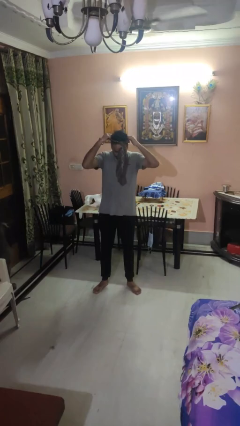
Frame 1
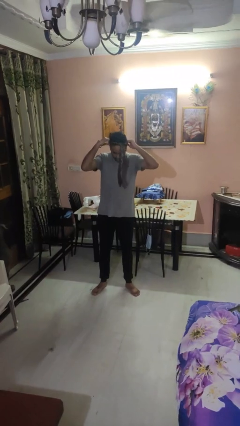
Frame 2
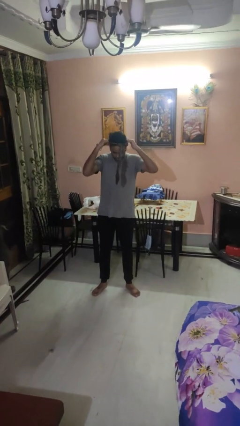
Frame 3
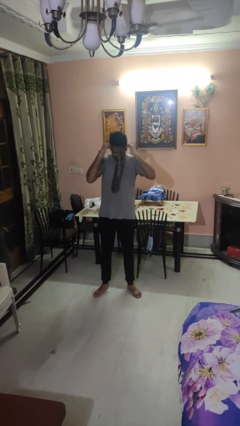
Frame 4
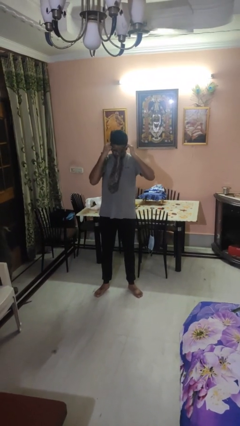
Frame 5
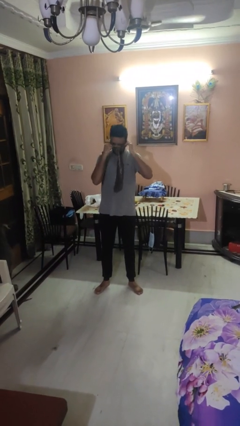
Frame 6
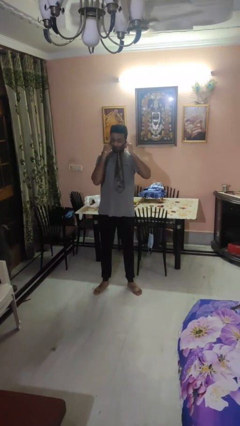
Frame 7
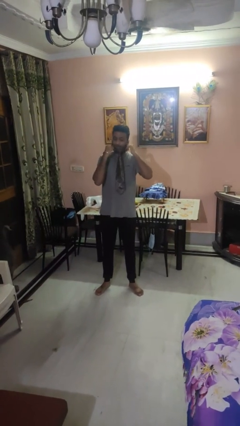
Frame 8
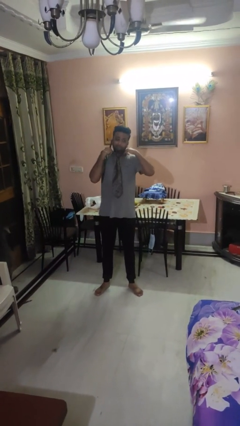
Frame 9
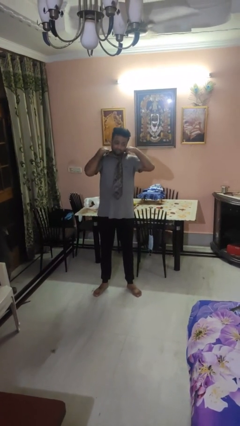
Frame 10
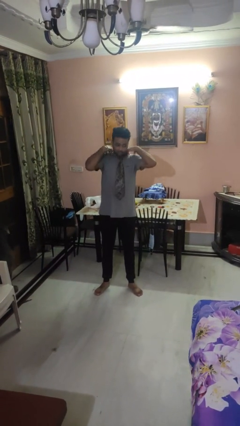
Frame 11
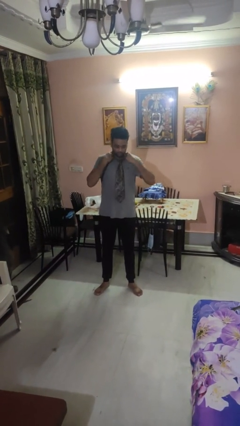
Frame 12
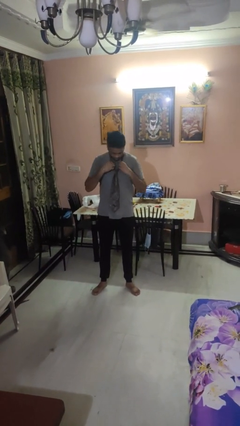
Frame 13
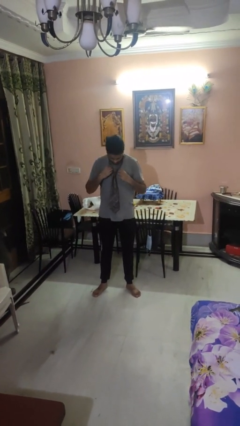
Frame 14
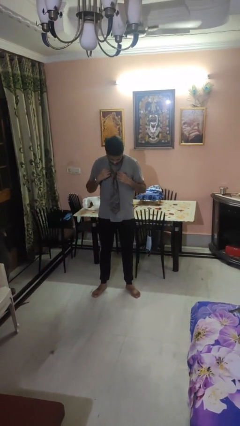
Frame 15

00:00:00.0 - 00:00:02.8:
person puts on necktie

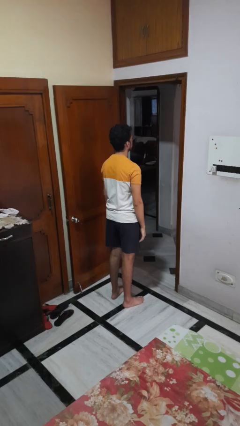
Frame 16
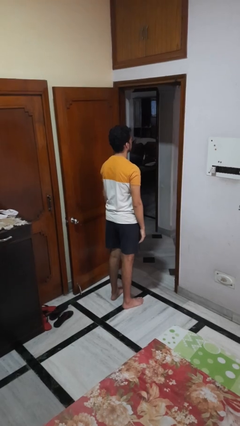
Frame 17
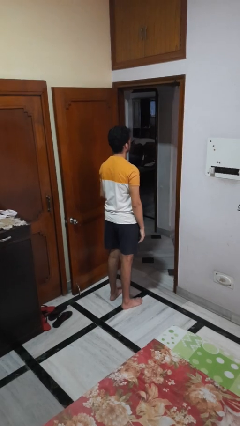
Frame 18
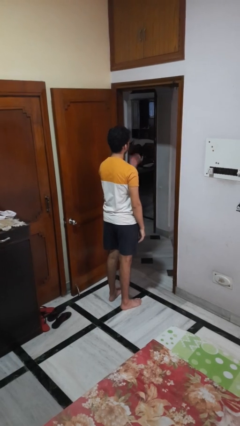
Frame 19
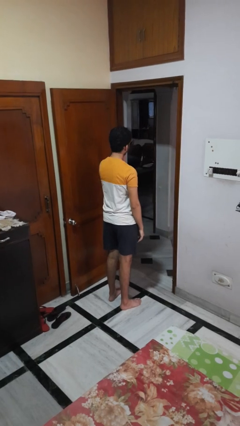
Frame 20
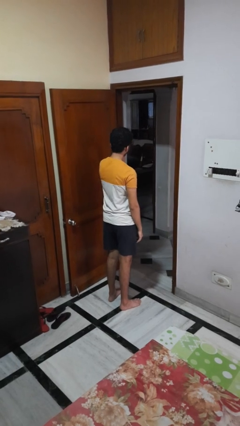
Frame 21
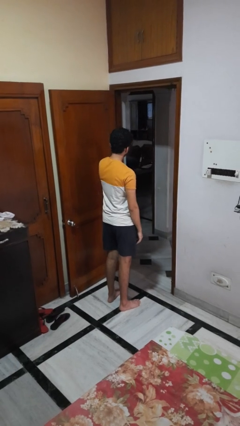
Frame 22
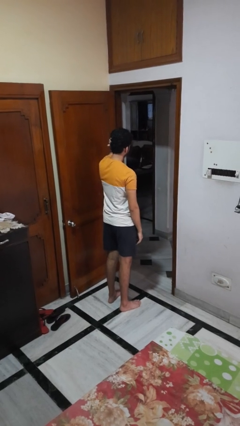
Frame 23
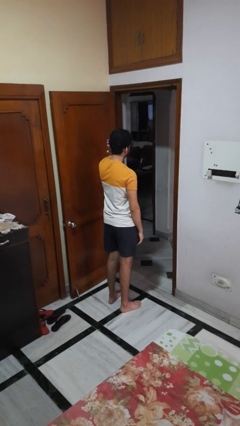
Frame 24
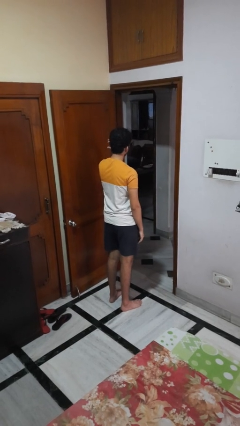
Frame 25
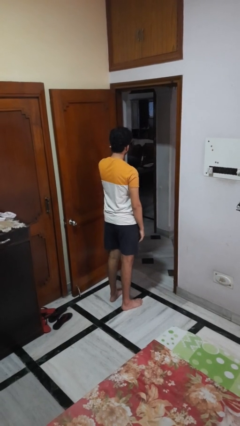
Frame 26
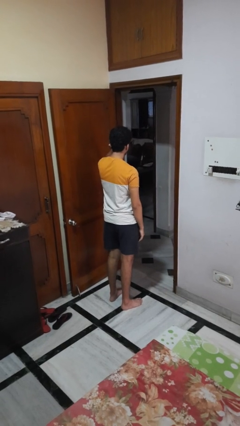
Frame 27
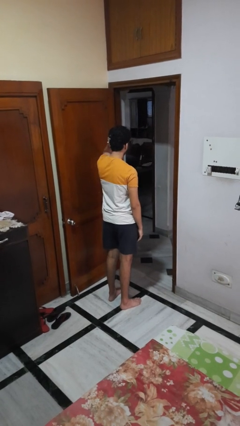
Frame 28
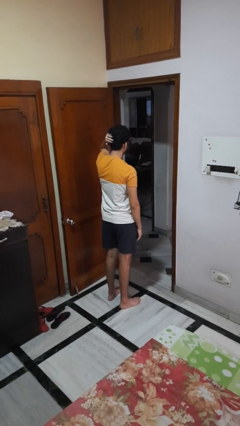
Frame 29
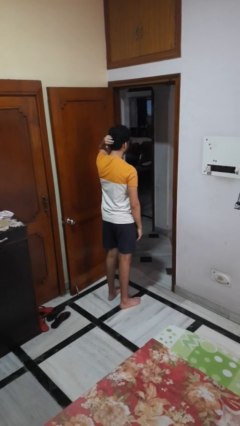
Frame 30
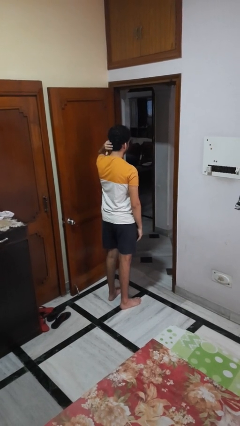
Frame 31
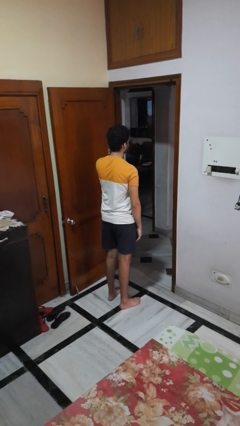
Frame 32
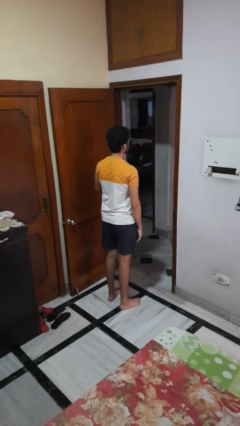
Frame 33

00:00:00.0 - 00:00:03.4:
person strokes hair

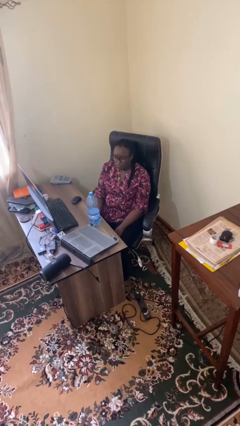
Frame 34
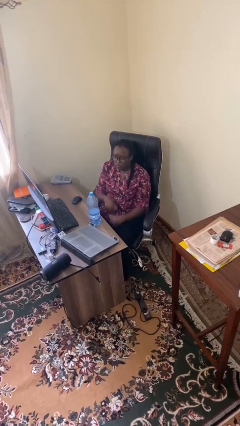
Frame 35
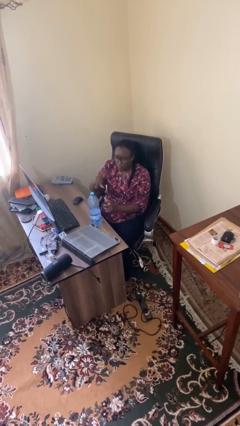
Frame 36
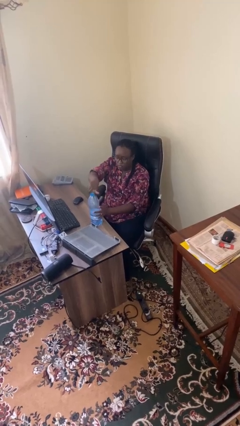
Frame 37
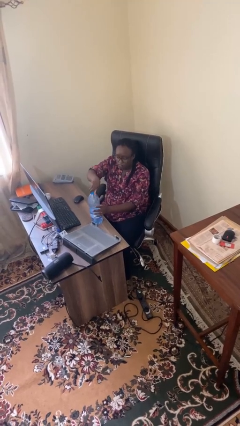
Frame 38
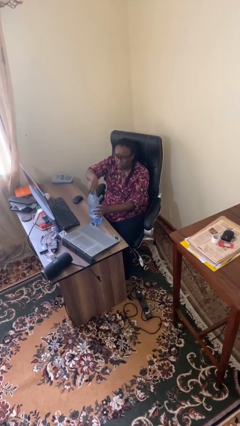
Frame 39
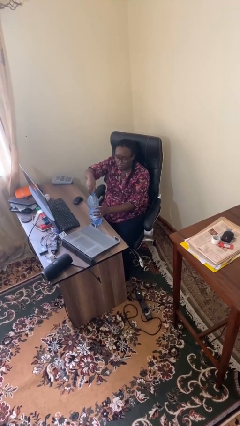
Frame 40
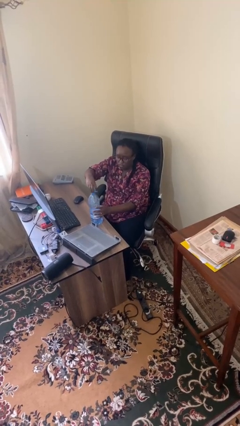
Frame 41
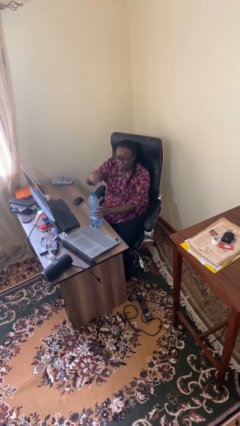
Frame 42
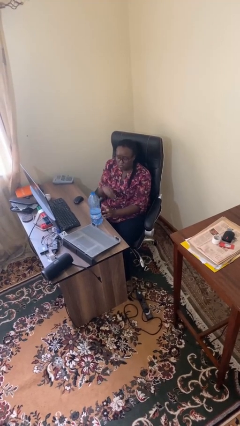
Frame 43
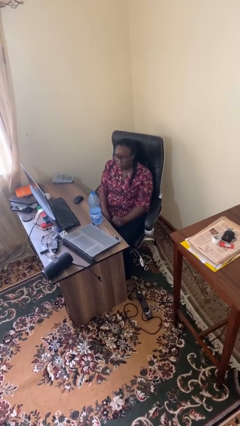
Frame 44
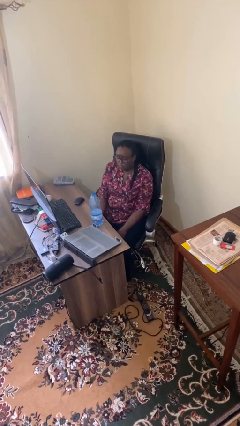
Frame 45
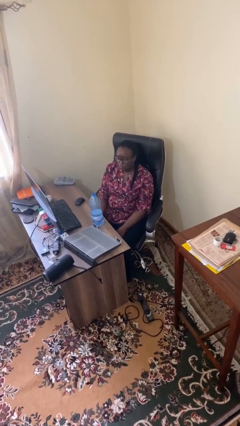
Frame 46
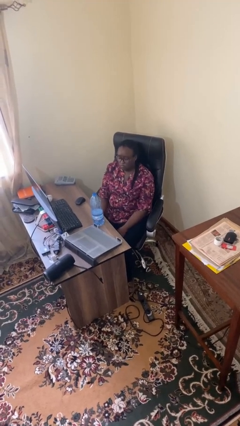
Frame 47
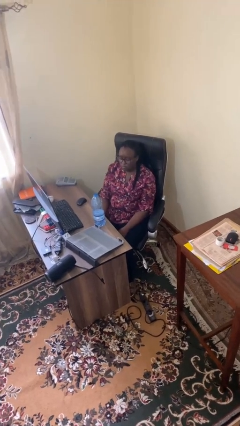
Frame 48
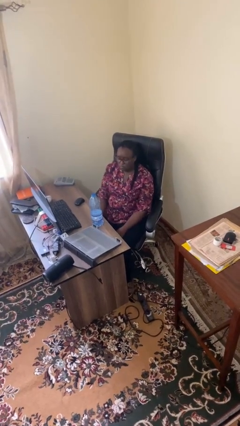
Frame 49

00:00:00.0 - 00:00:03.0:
person unscrews lid from bottle

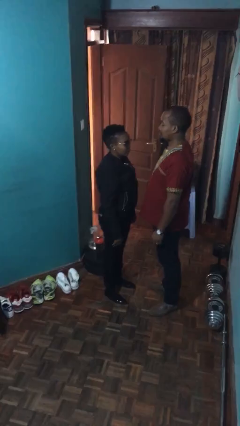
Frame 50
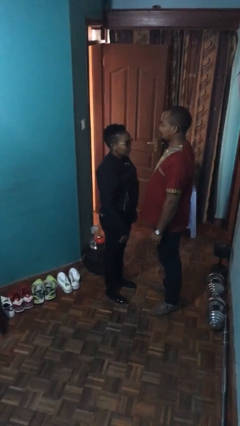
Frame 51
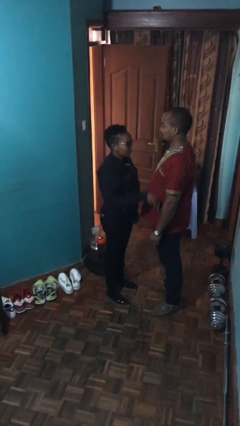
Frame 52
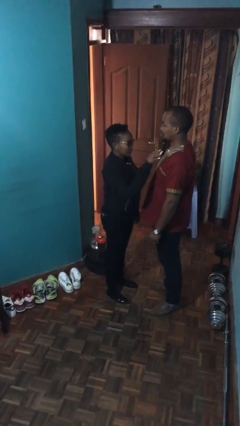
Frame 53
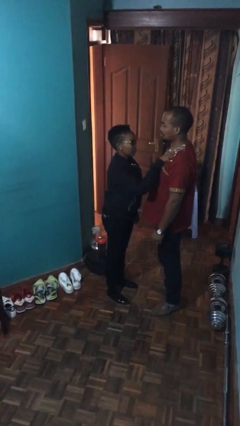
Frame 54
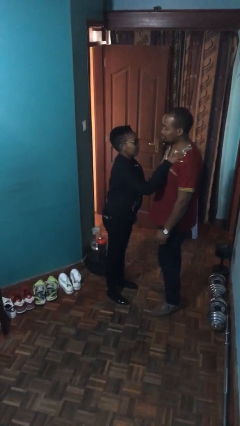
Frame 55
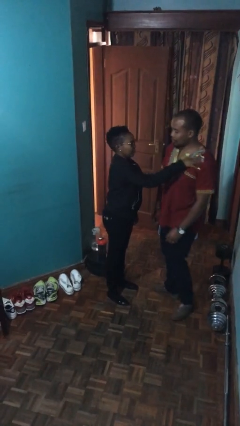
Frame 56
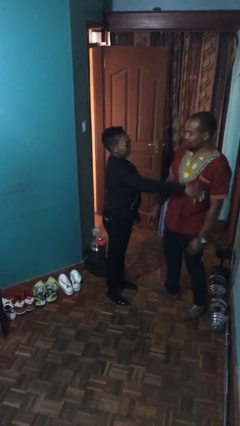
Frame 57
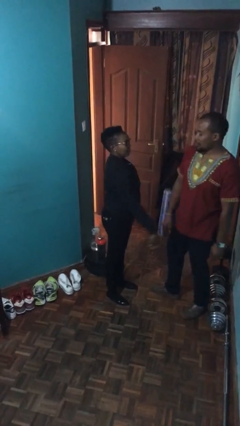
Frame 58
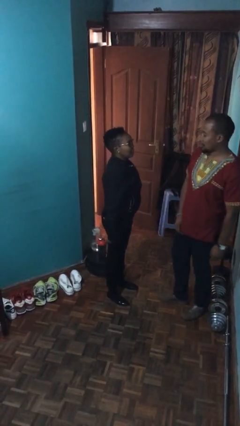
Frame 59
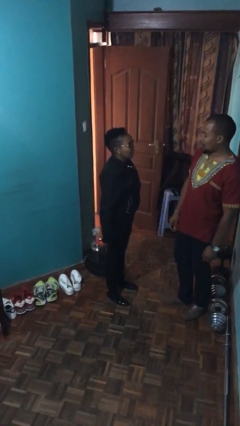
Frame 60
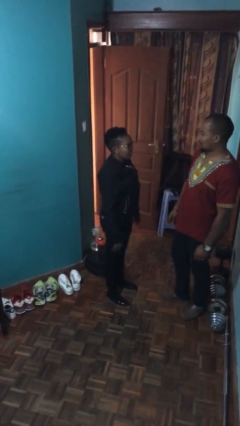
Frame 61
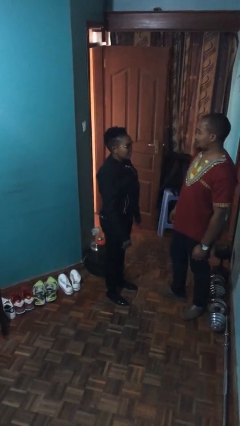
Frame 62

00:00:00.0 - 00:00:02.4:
person shoves person

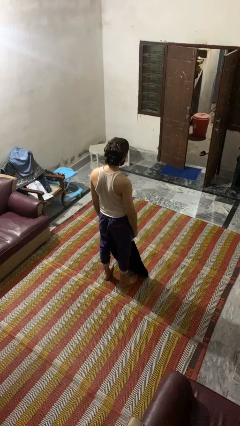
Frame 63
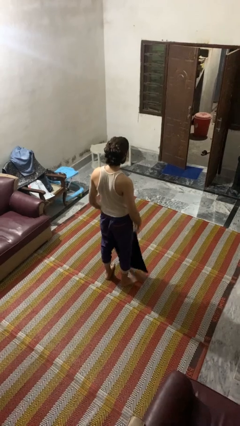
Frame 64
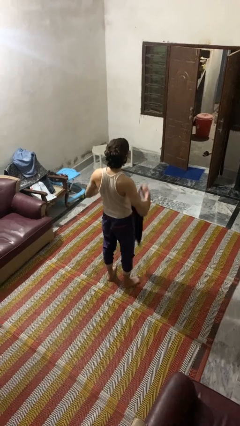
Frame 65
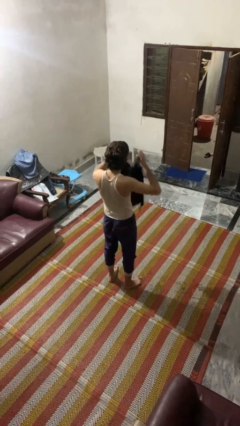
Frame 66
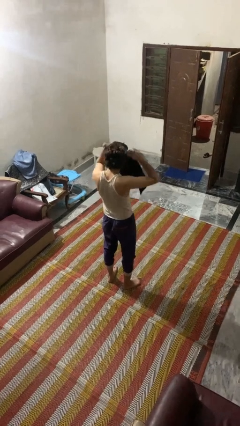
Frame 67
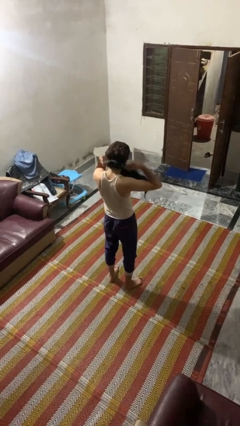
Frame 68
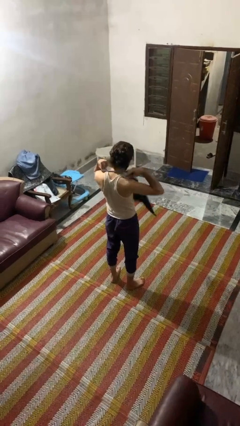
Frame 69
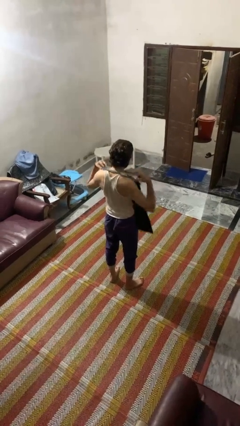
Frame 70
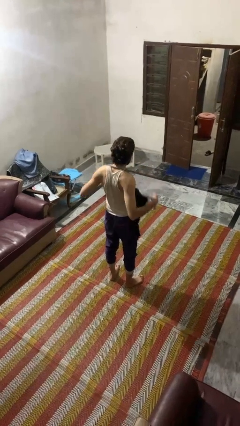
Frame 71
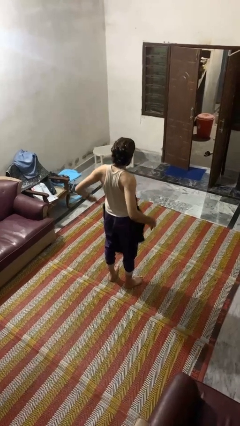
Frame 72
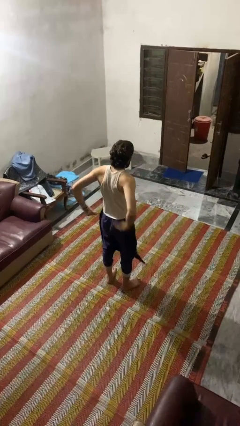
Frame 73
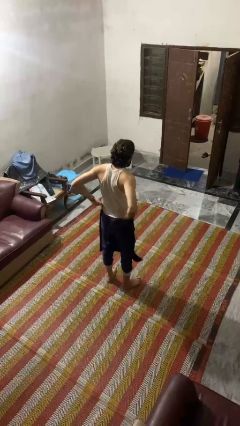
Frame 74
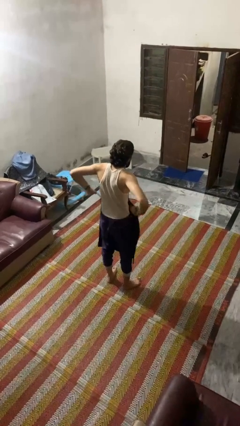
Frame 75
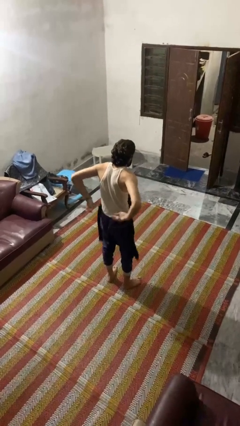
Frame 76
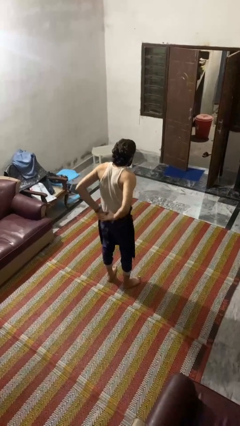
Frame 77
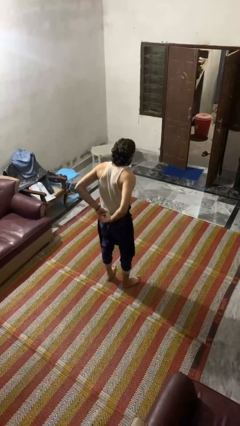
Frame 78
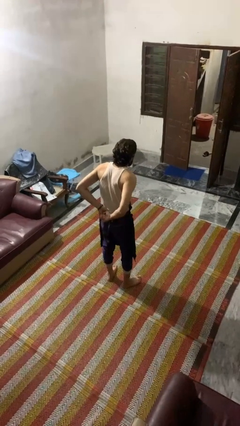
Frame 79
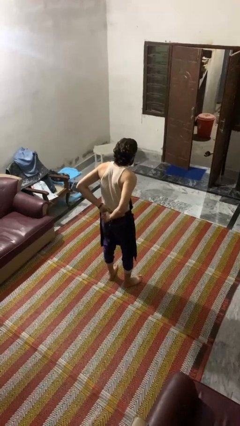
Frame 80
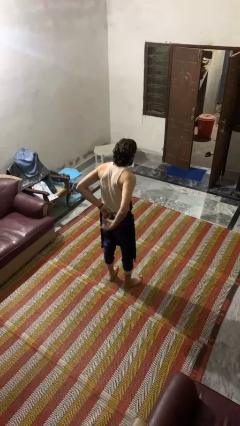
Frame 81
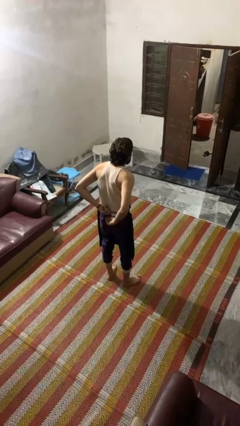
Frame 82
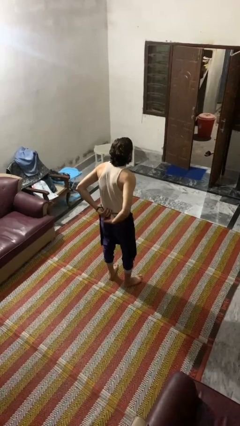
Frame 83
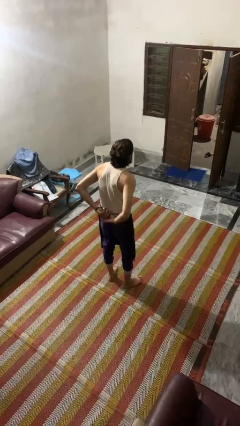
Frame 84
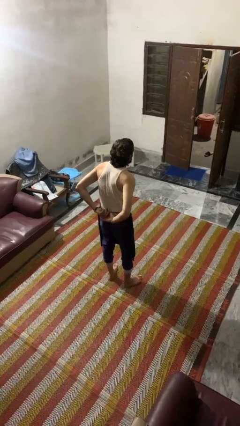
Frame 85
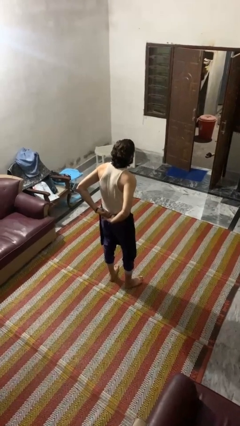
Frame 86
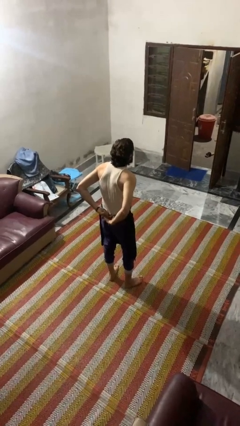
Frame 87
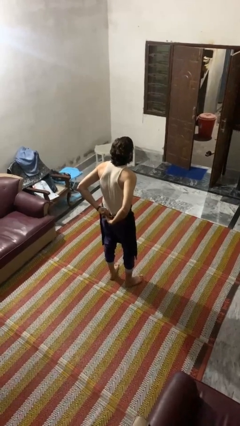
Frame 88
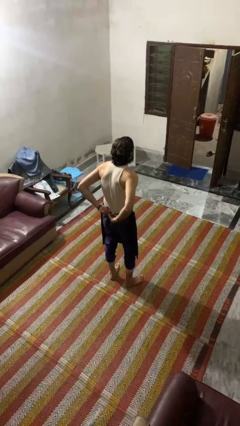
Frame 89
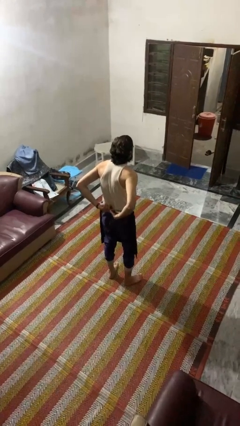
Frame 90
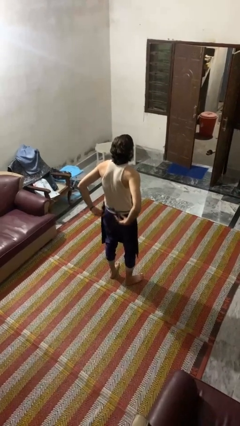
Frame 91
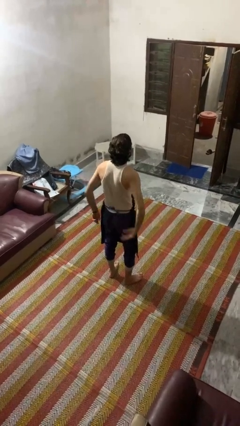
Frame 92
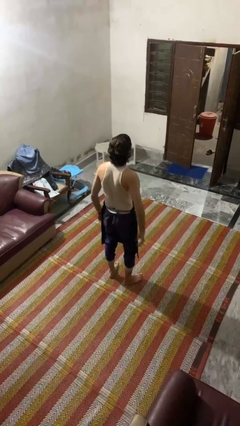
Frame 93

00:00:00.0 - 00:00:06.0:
person puts on apron
